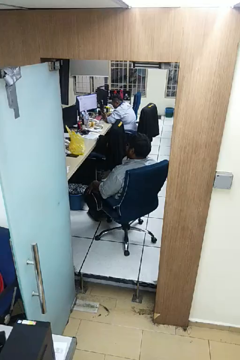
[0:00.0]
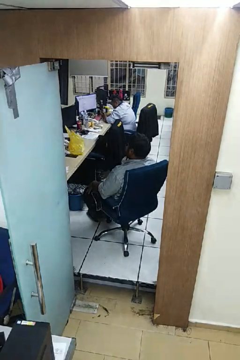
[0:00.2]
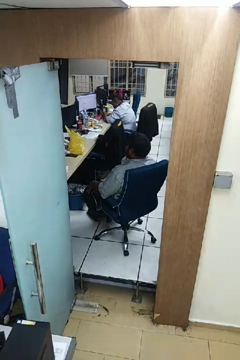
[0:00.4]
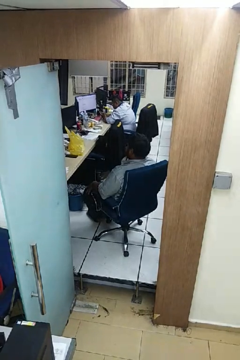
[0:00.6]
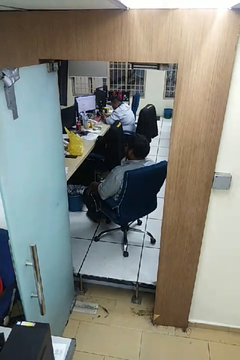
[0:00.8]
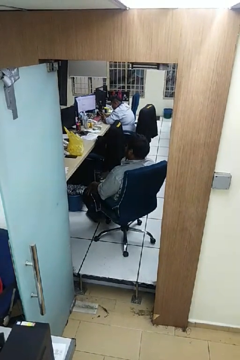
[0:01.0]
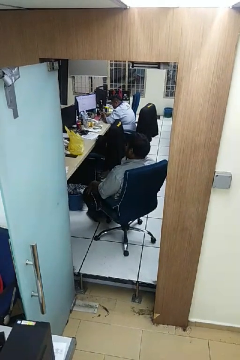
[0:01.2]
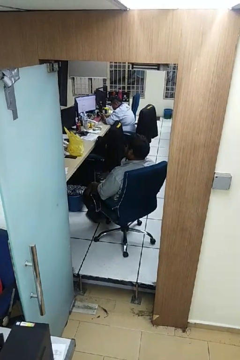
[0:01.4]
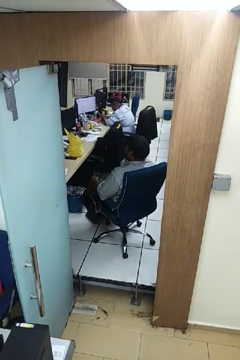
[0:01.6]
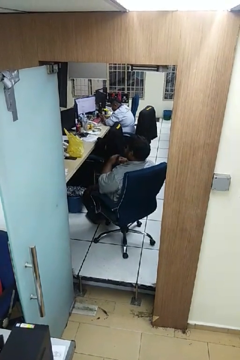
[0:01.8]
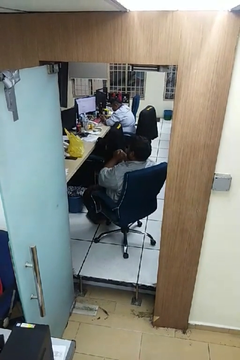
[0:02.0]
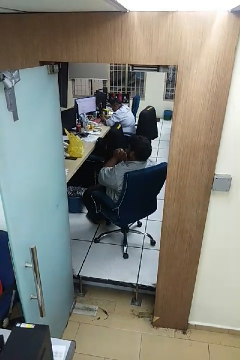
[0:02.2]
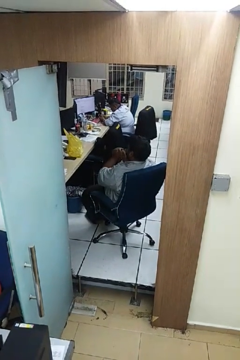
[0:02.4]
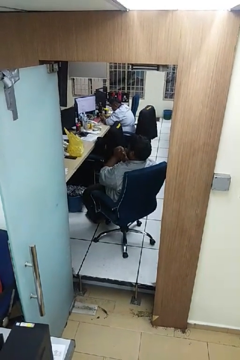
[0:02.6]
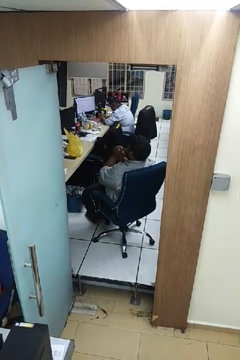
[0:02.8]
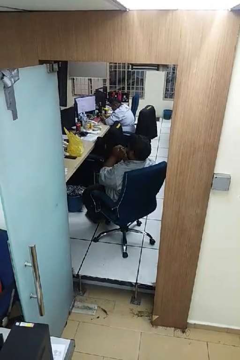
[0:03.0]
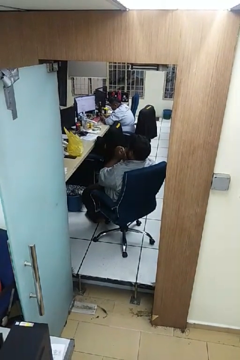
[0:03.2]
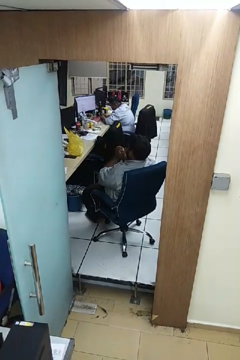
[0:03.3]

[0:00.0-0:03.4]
person cracks knuckles

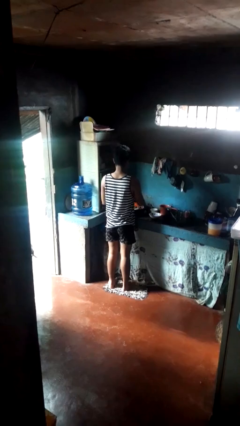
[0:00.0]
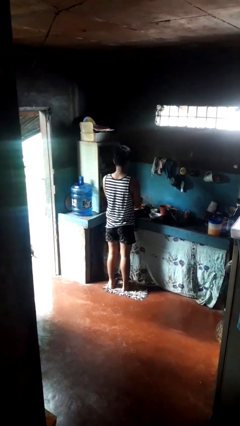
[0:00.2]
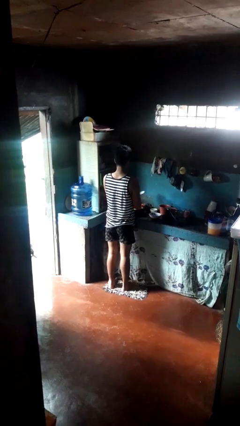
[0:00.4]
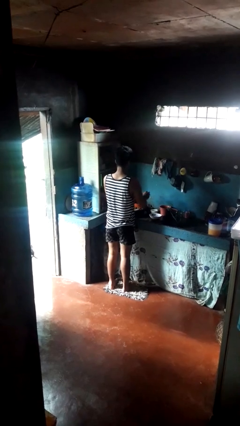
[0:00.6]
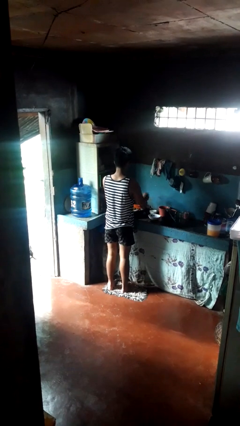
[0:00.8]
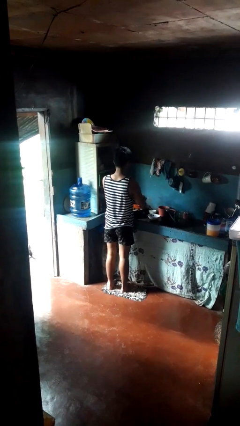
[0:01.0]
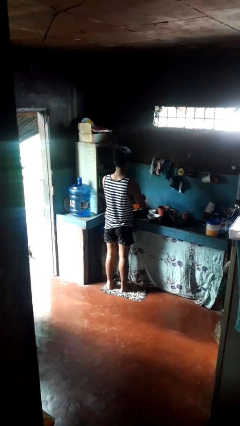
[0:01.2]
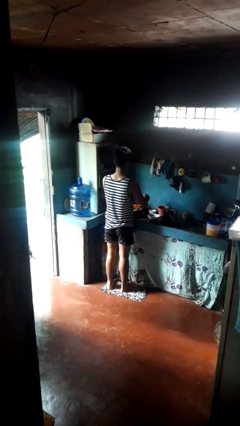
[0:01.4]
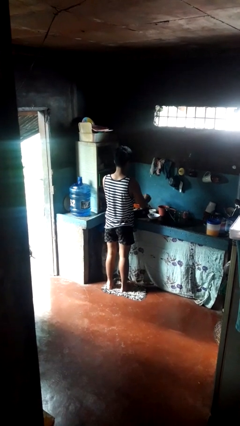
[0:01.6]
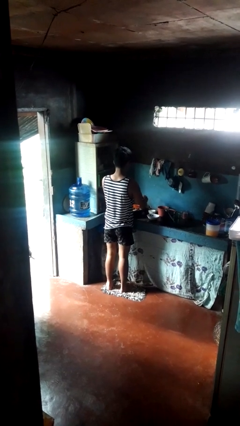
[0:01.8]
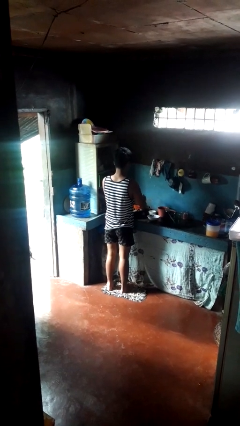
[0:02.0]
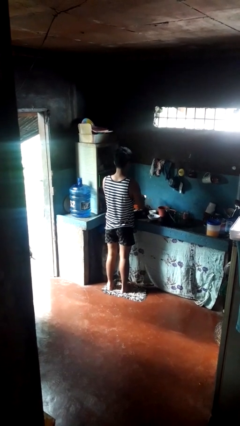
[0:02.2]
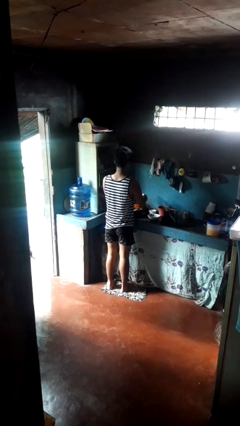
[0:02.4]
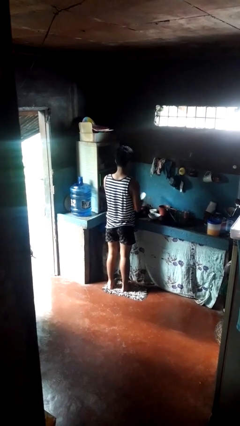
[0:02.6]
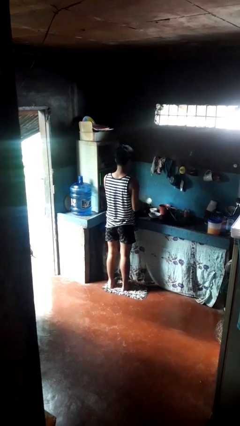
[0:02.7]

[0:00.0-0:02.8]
person washes dish

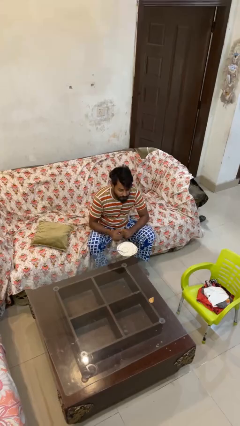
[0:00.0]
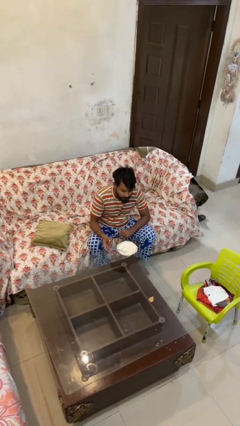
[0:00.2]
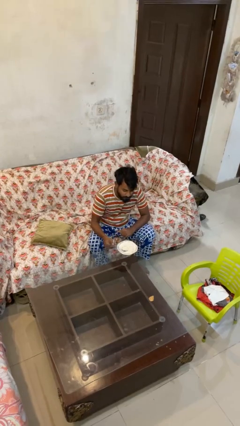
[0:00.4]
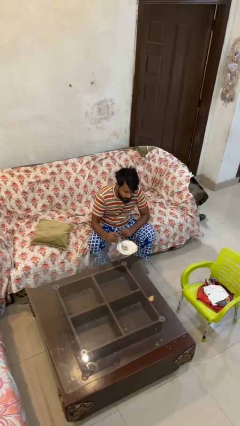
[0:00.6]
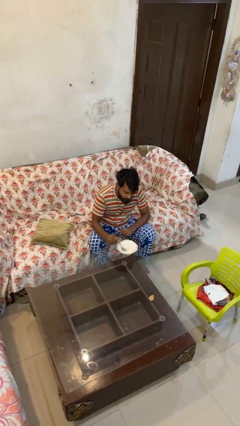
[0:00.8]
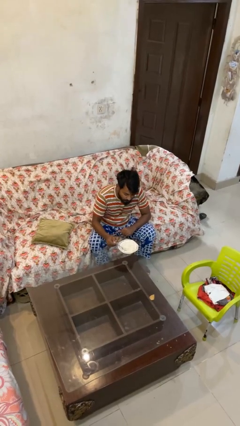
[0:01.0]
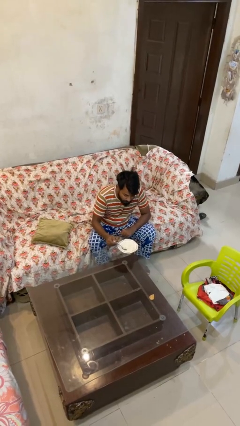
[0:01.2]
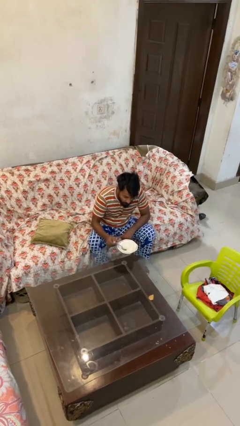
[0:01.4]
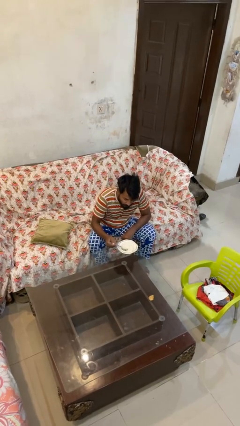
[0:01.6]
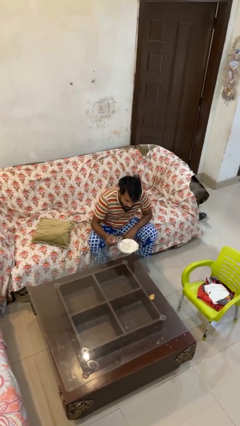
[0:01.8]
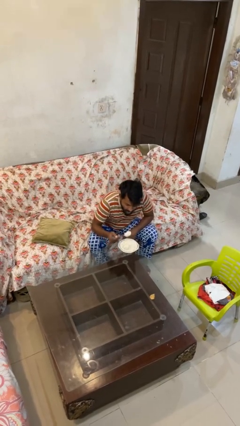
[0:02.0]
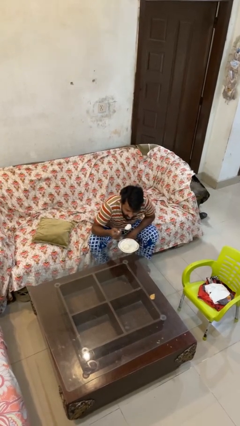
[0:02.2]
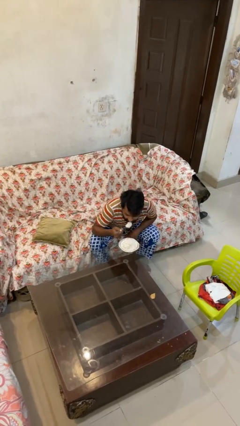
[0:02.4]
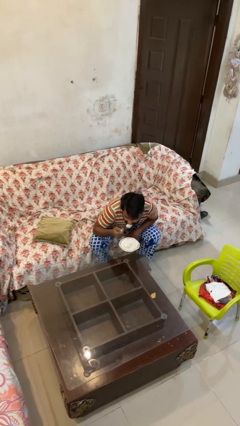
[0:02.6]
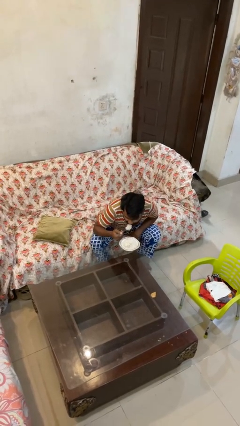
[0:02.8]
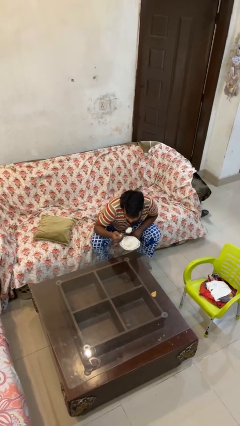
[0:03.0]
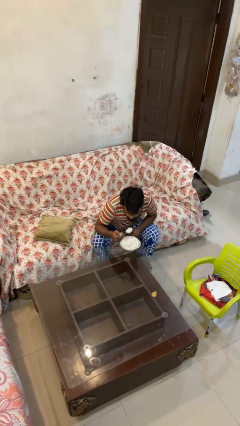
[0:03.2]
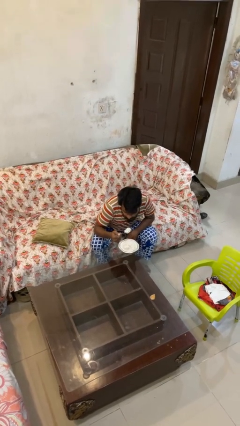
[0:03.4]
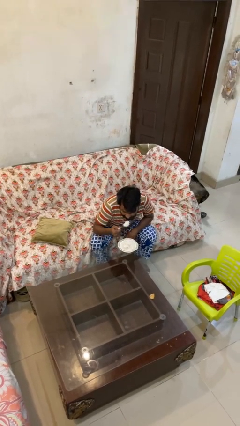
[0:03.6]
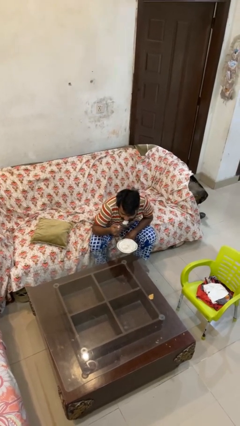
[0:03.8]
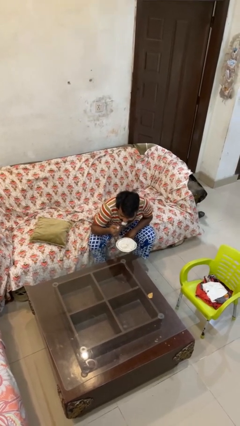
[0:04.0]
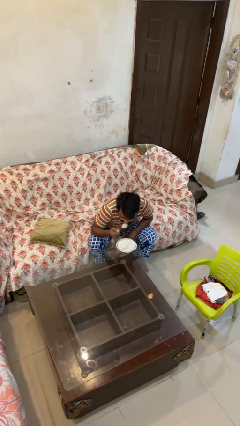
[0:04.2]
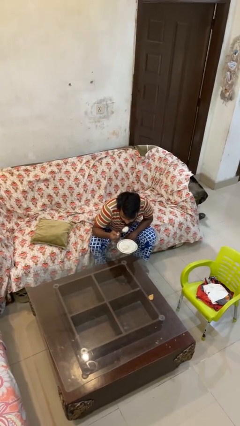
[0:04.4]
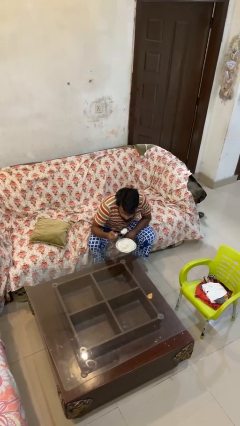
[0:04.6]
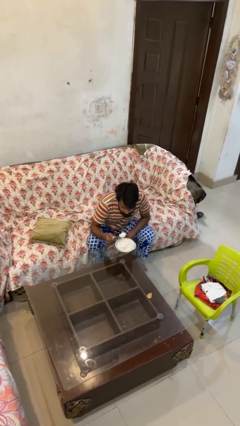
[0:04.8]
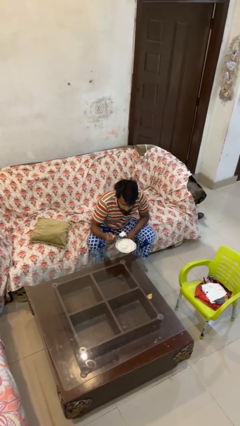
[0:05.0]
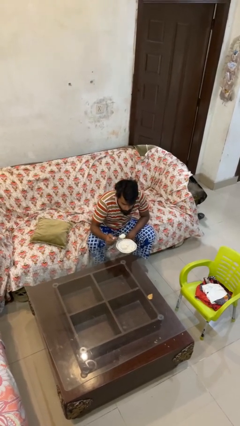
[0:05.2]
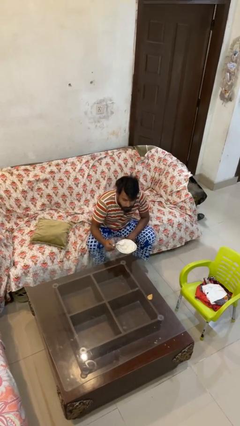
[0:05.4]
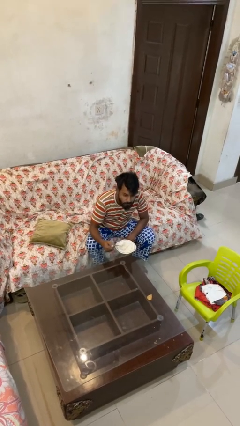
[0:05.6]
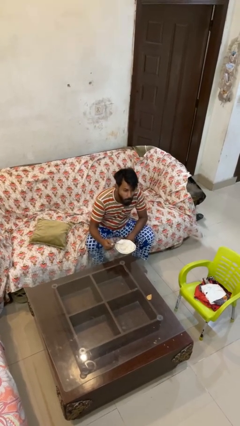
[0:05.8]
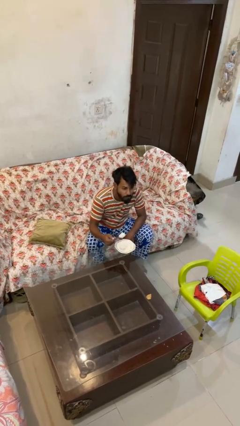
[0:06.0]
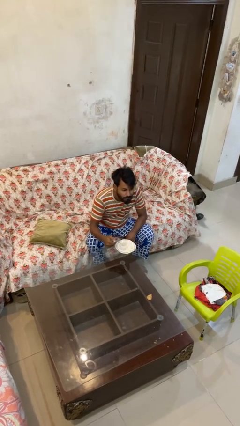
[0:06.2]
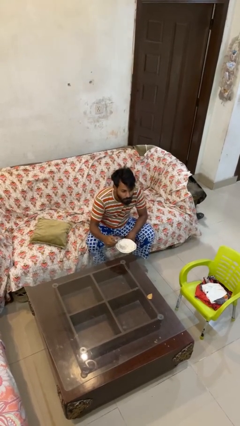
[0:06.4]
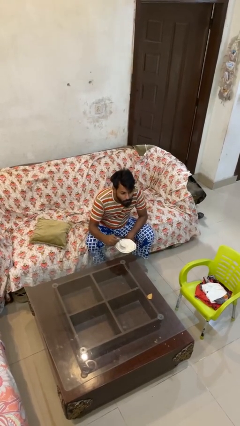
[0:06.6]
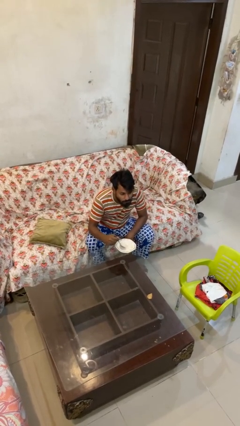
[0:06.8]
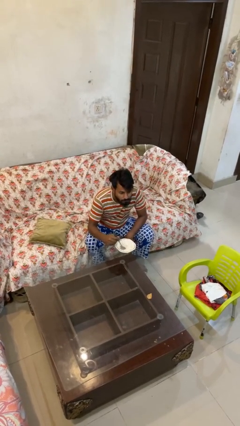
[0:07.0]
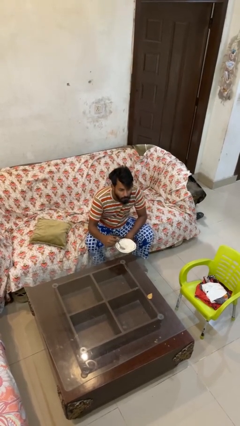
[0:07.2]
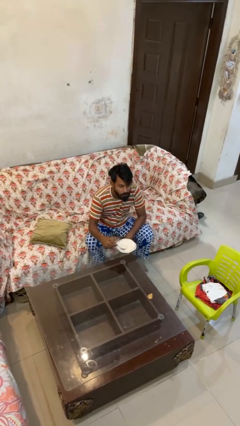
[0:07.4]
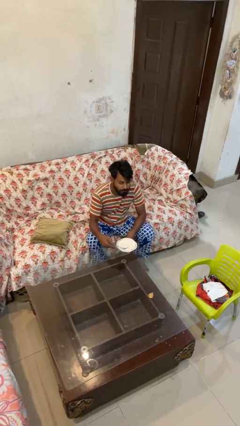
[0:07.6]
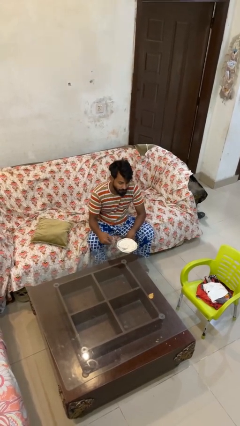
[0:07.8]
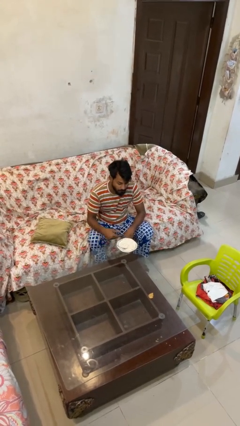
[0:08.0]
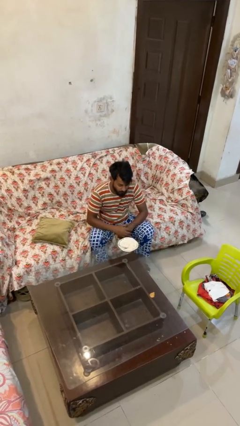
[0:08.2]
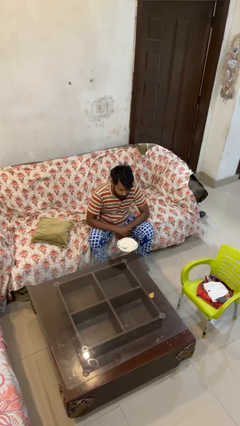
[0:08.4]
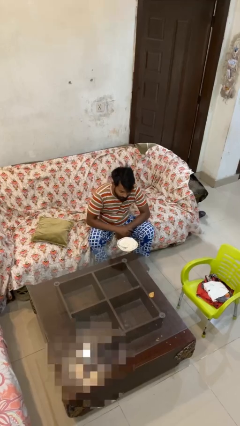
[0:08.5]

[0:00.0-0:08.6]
person eats with utensil

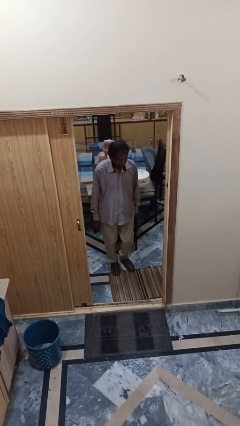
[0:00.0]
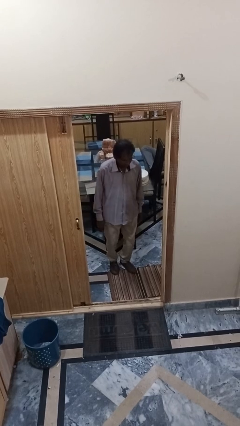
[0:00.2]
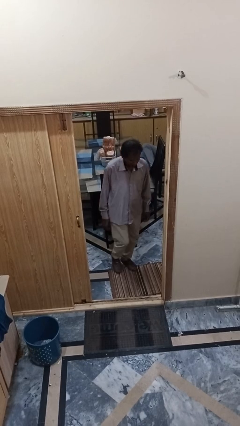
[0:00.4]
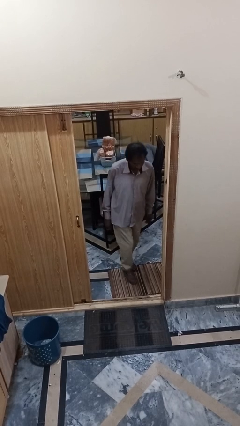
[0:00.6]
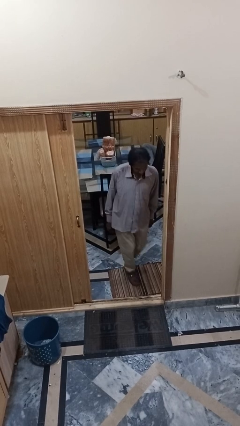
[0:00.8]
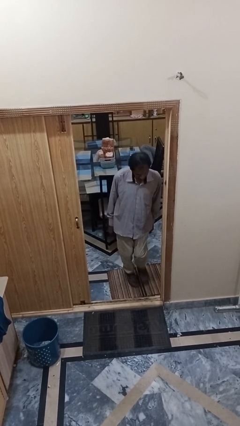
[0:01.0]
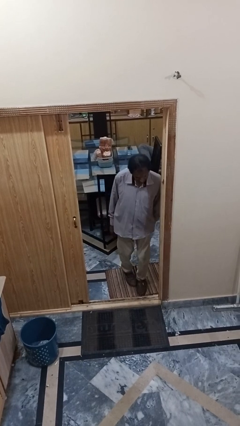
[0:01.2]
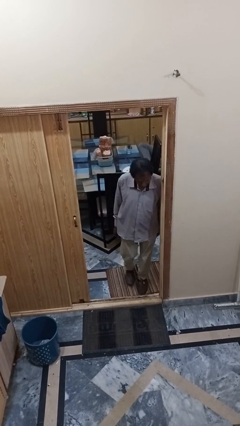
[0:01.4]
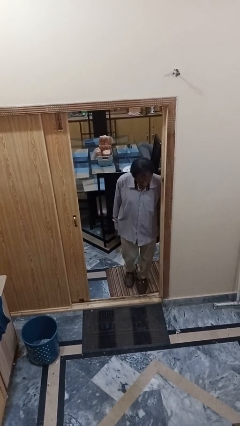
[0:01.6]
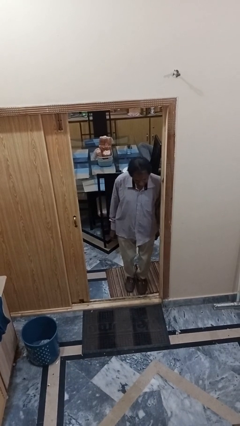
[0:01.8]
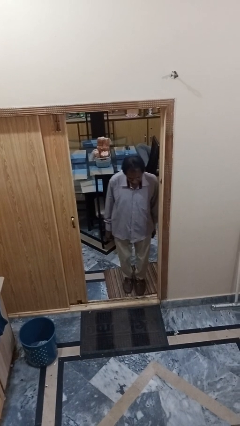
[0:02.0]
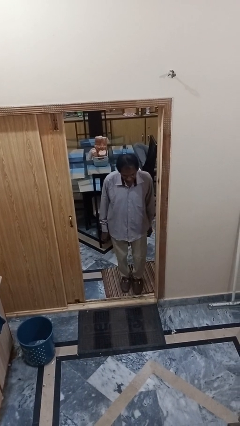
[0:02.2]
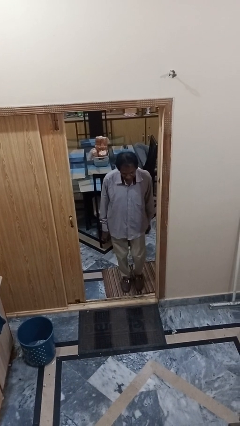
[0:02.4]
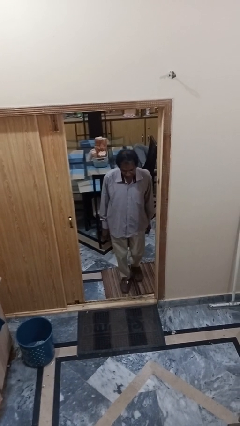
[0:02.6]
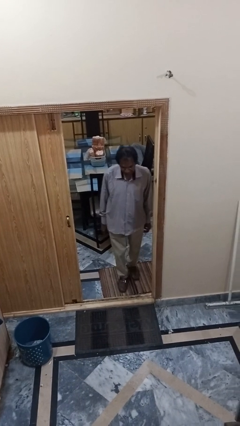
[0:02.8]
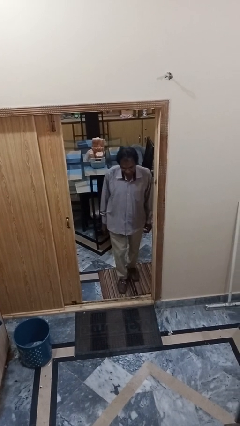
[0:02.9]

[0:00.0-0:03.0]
person bumps into wall

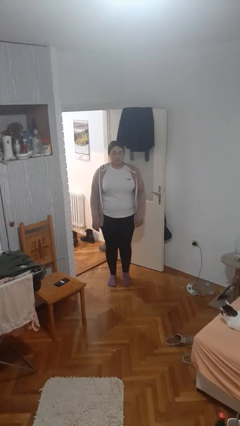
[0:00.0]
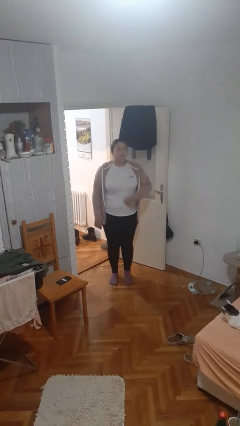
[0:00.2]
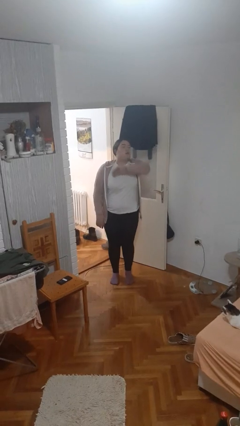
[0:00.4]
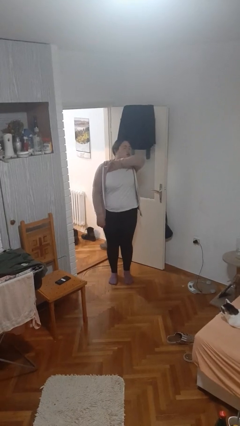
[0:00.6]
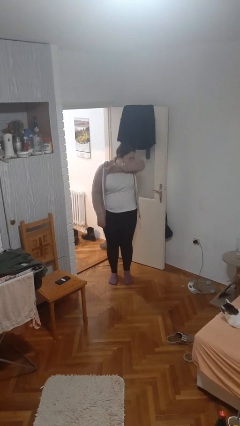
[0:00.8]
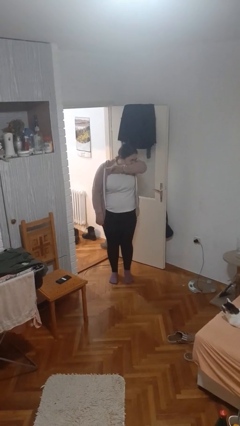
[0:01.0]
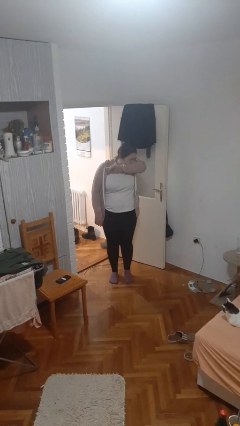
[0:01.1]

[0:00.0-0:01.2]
person sneezes into arm
